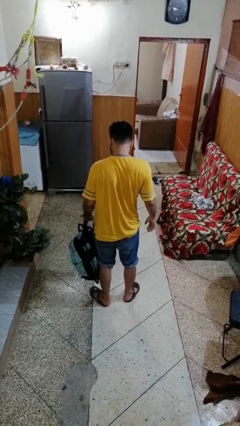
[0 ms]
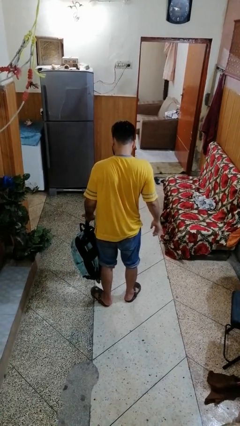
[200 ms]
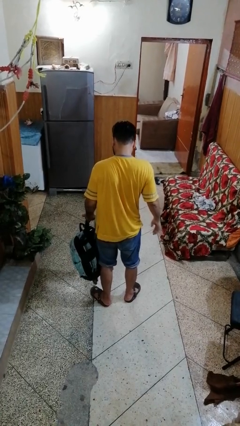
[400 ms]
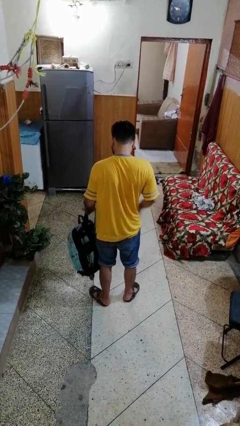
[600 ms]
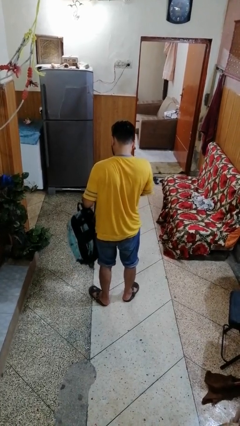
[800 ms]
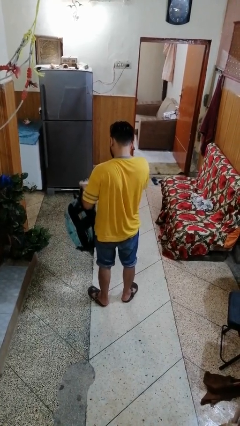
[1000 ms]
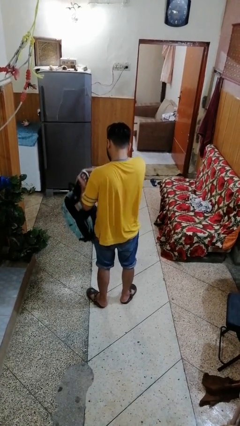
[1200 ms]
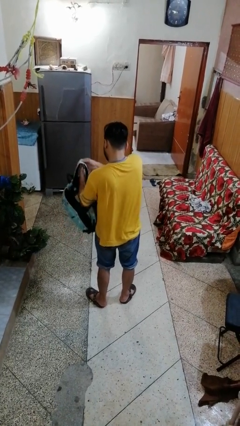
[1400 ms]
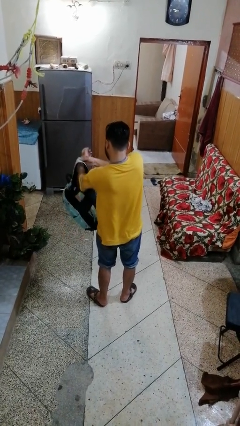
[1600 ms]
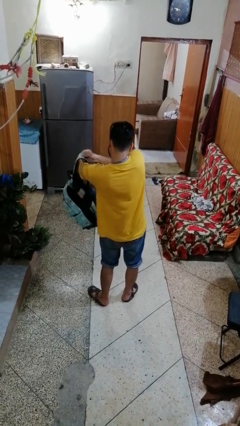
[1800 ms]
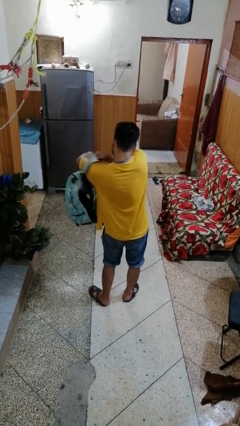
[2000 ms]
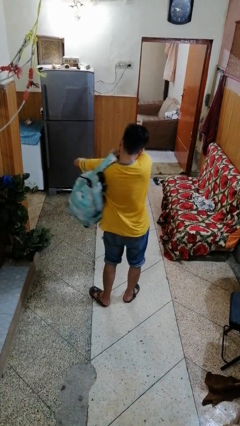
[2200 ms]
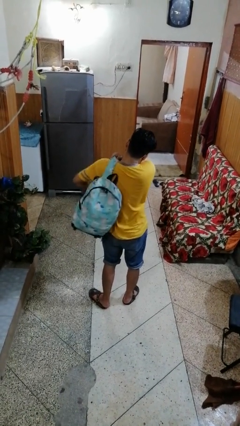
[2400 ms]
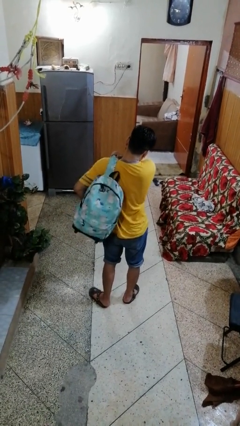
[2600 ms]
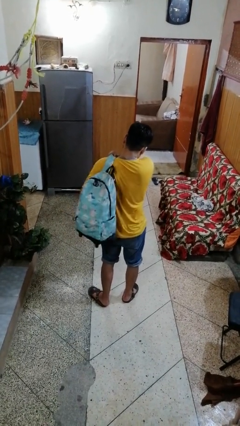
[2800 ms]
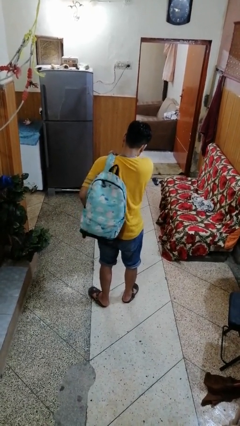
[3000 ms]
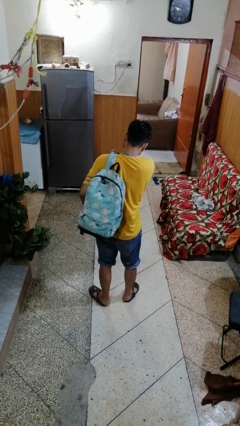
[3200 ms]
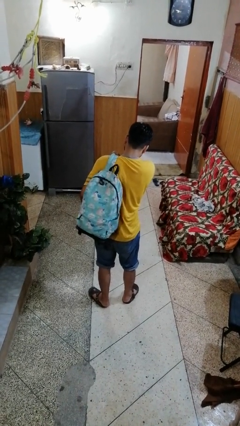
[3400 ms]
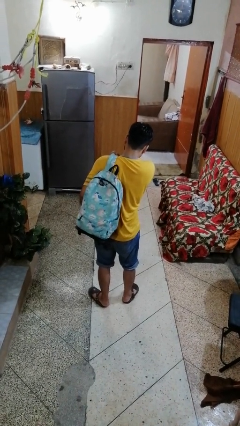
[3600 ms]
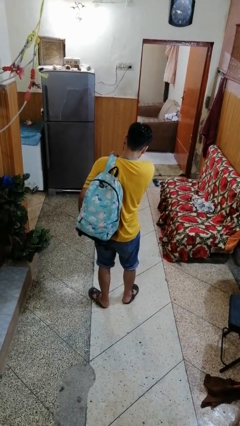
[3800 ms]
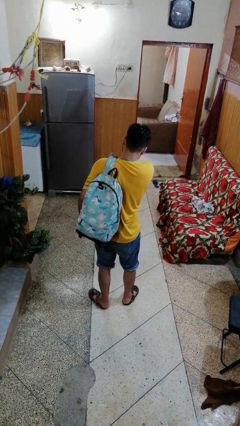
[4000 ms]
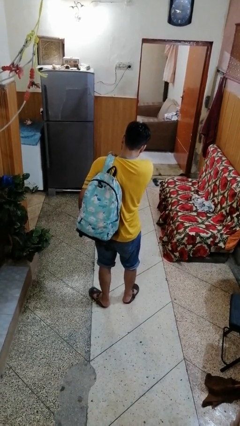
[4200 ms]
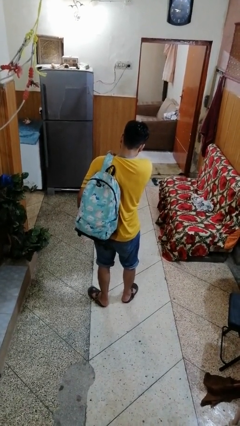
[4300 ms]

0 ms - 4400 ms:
person puts on backpack

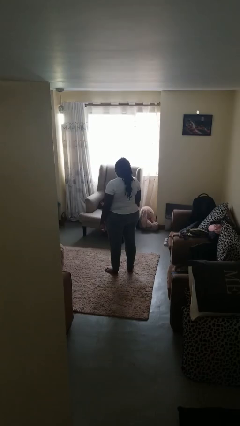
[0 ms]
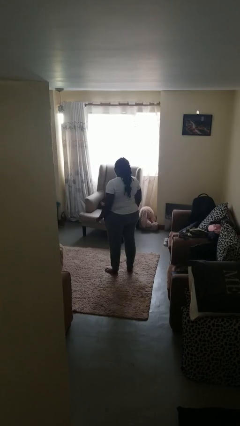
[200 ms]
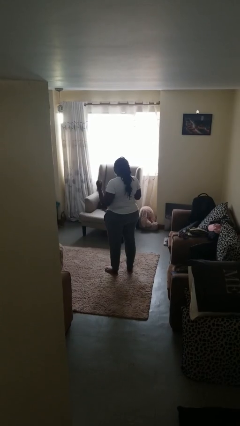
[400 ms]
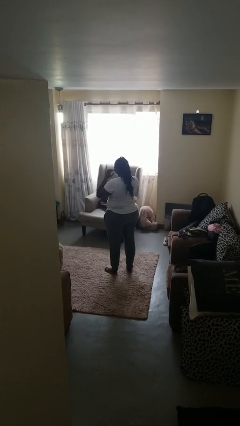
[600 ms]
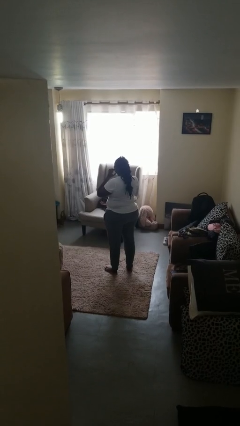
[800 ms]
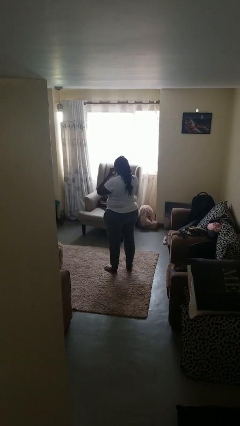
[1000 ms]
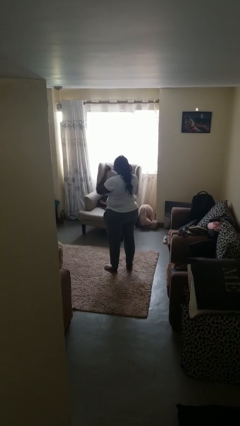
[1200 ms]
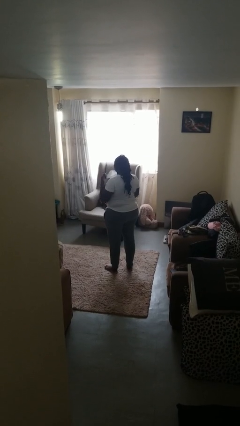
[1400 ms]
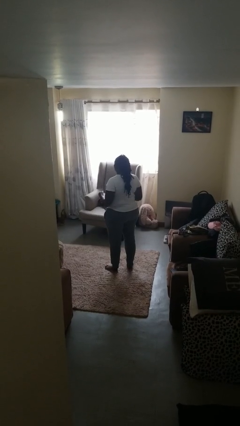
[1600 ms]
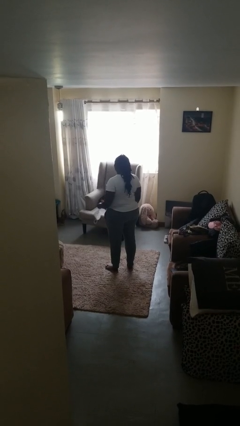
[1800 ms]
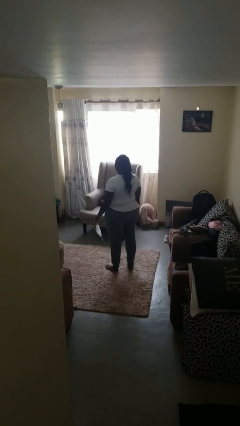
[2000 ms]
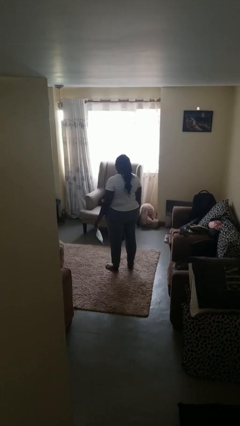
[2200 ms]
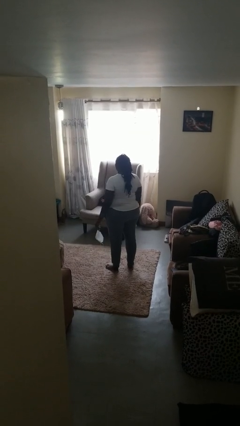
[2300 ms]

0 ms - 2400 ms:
person takes off facemask

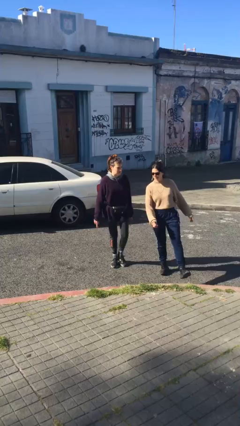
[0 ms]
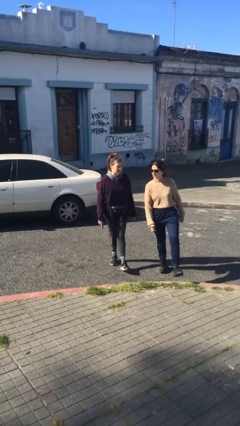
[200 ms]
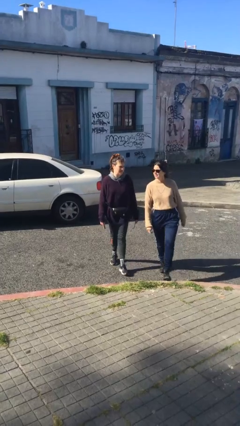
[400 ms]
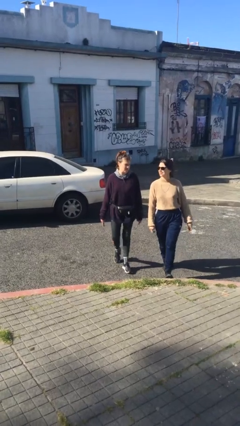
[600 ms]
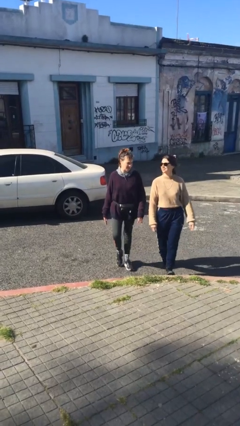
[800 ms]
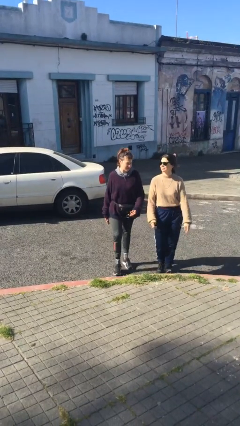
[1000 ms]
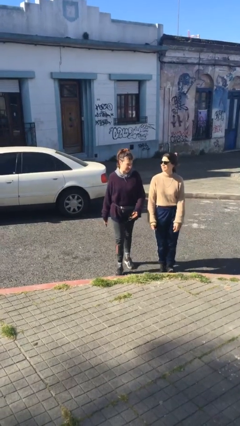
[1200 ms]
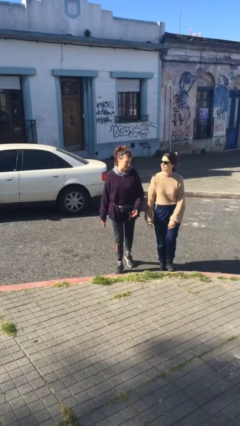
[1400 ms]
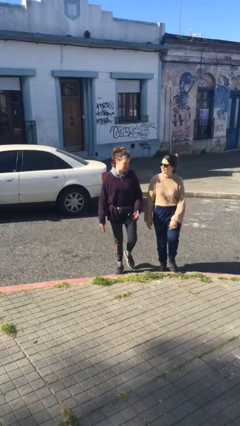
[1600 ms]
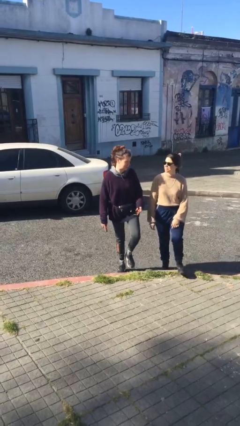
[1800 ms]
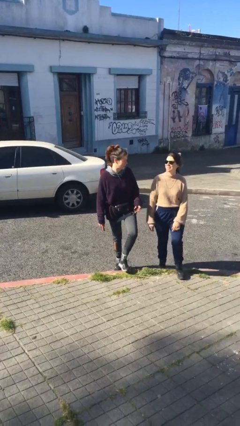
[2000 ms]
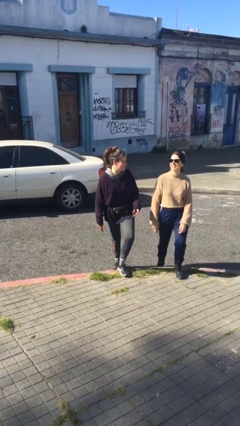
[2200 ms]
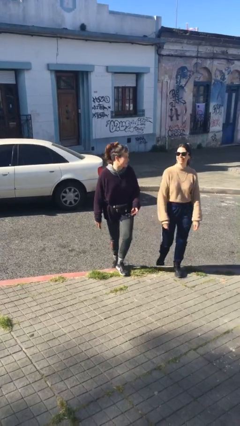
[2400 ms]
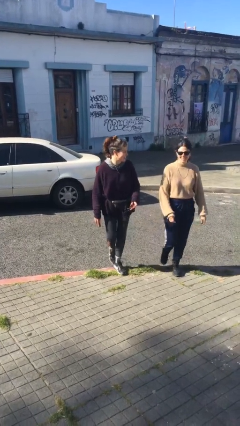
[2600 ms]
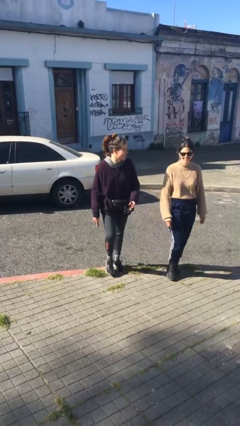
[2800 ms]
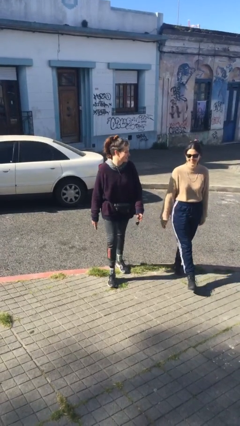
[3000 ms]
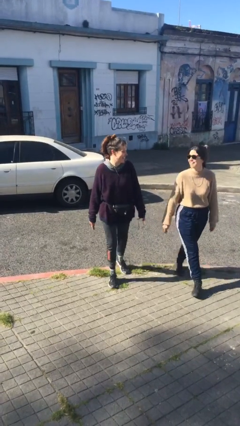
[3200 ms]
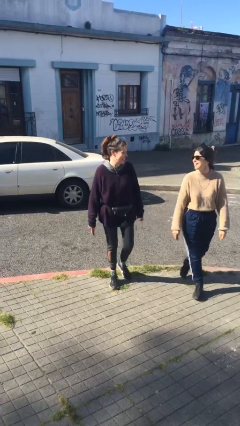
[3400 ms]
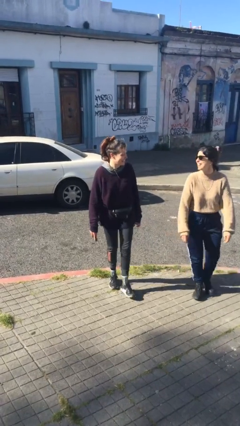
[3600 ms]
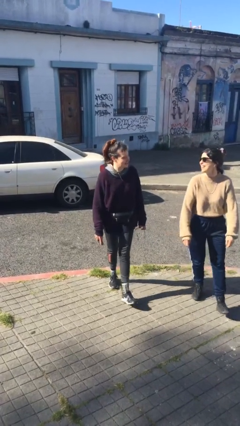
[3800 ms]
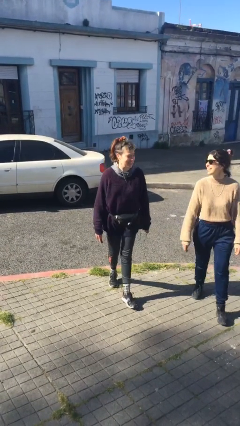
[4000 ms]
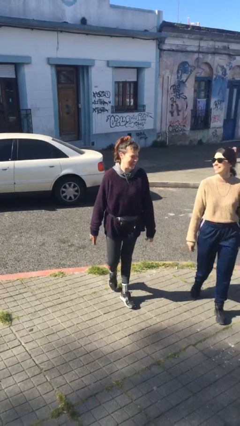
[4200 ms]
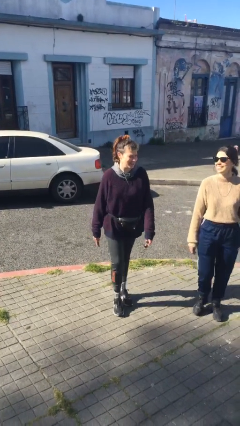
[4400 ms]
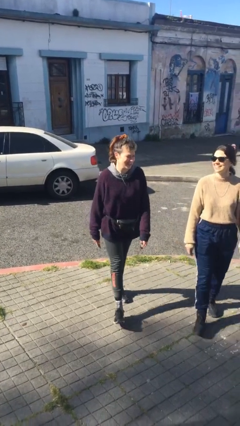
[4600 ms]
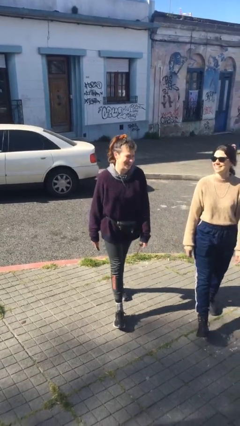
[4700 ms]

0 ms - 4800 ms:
person talks to person

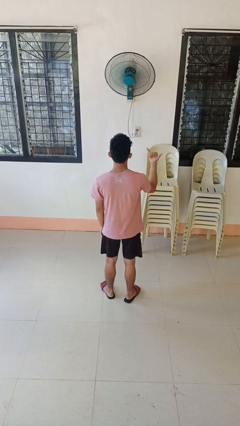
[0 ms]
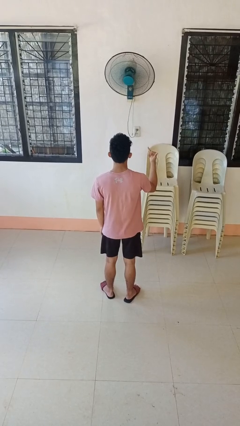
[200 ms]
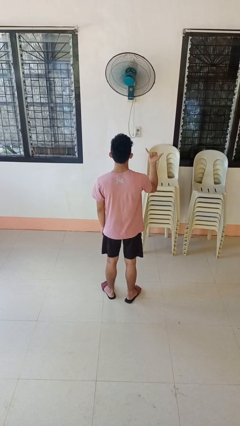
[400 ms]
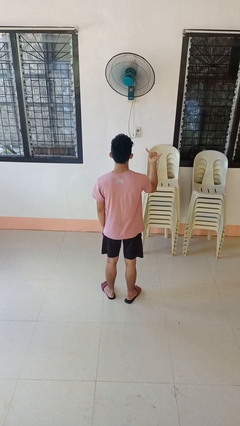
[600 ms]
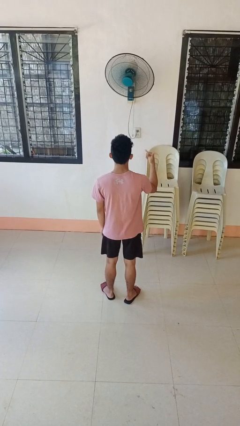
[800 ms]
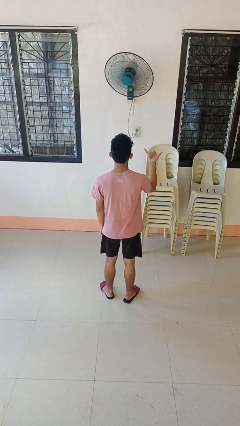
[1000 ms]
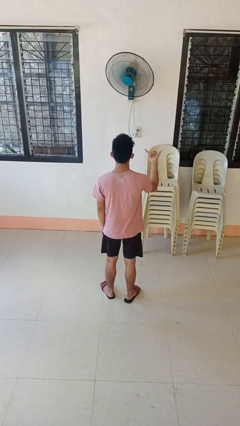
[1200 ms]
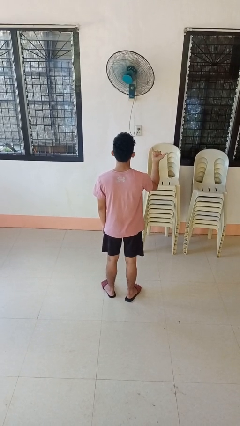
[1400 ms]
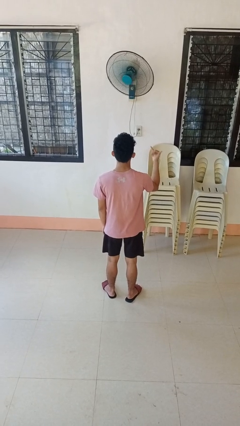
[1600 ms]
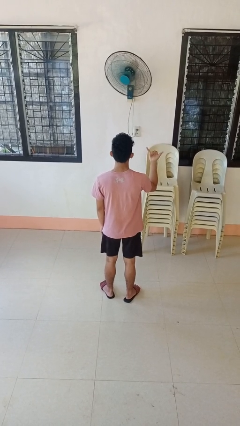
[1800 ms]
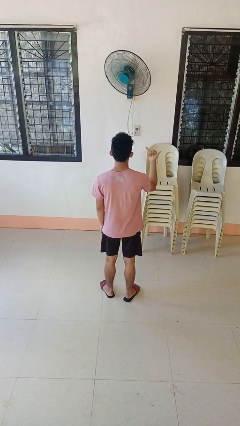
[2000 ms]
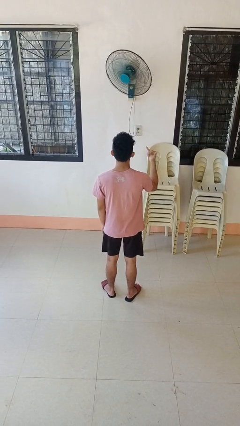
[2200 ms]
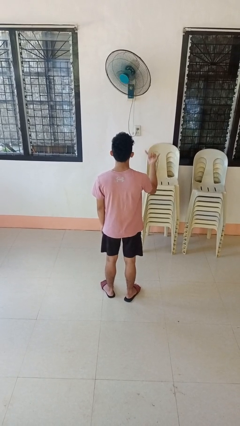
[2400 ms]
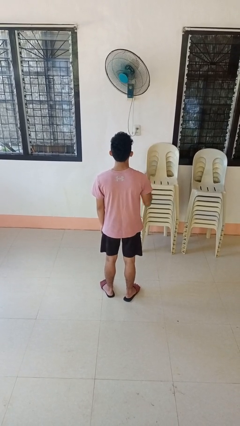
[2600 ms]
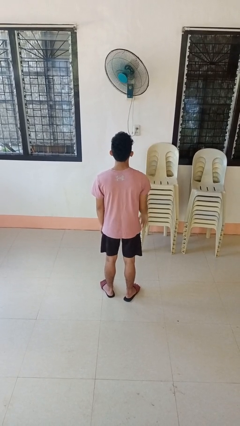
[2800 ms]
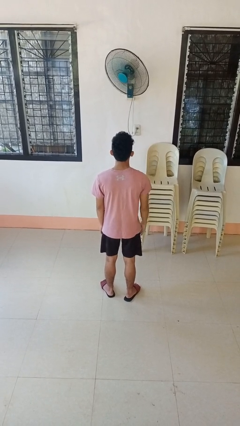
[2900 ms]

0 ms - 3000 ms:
person gestures hang loose

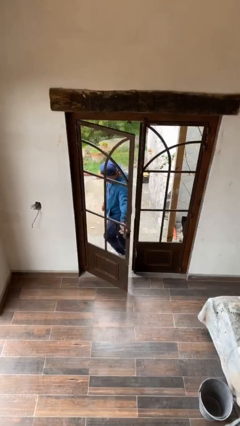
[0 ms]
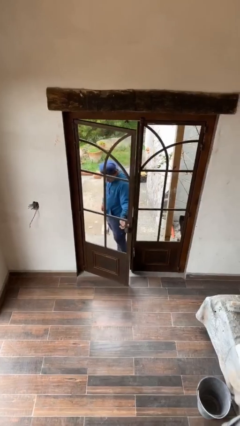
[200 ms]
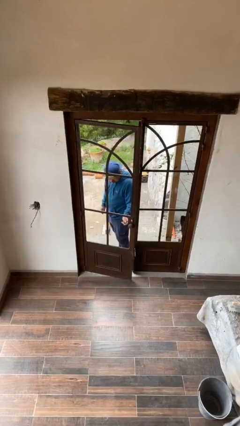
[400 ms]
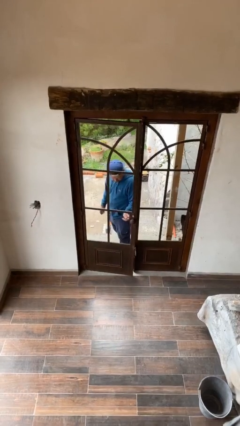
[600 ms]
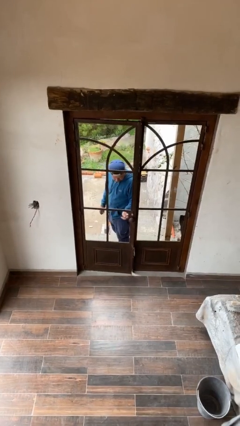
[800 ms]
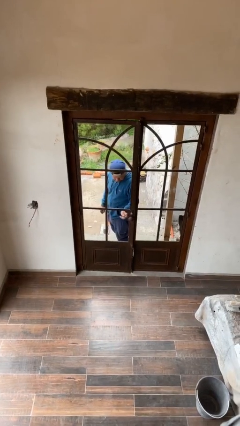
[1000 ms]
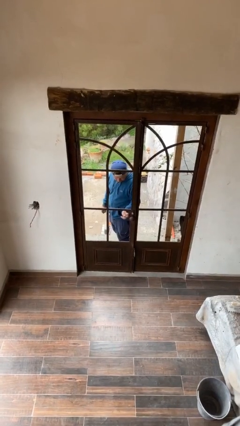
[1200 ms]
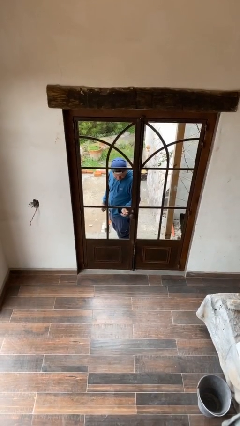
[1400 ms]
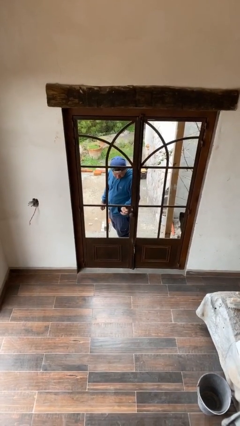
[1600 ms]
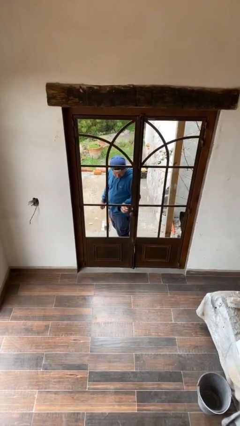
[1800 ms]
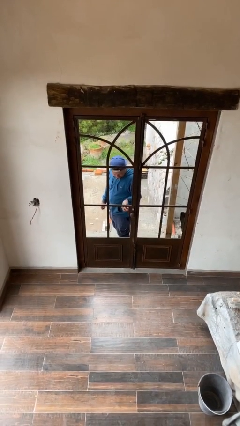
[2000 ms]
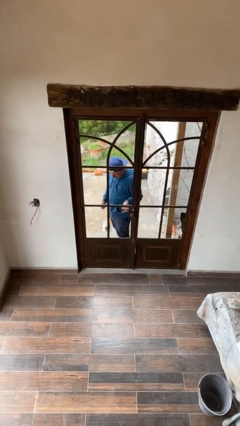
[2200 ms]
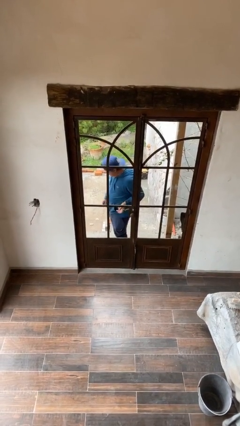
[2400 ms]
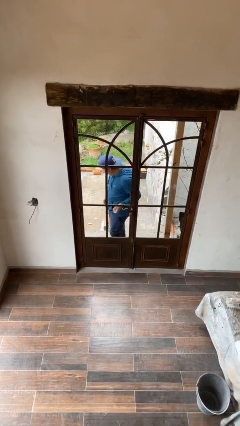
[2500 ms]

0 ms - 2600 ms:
person closes facility door

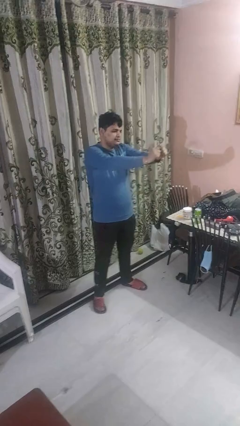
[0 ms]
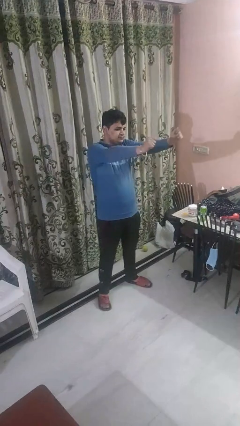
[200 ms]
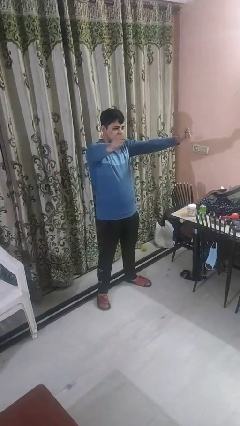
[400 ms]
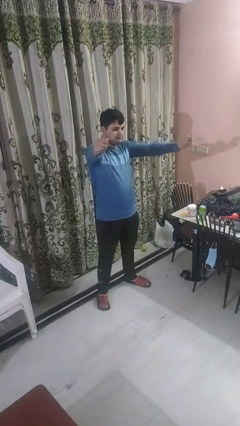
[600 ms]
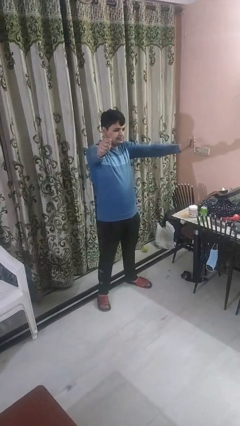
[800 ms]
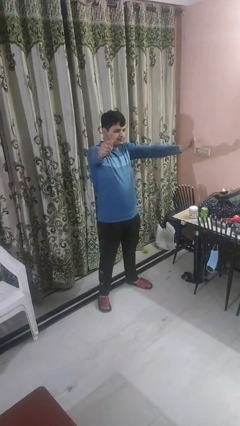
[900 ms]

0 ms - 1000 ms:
person gestures zoom in
